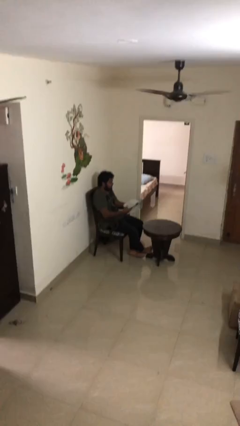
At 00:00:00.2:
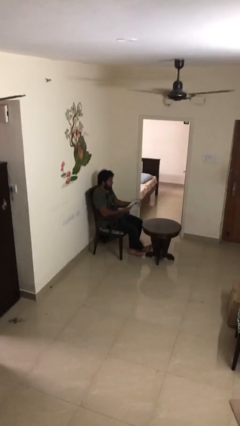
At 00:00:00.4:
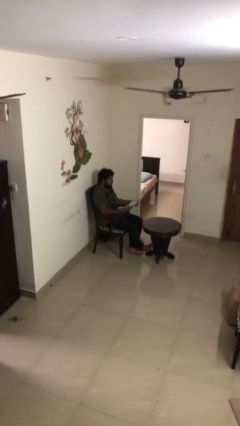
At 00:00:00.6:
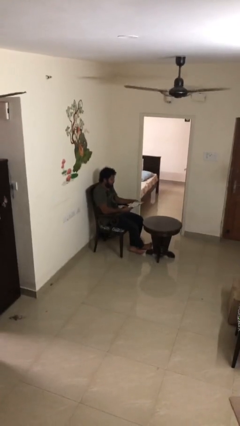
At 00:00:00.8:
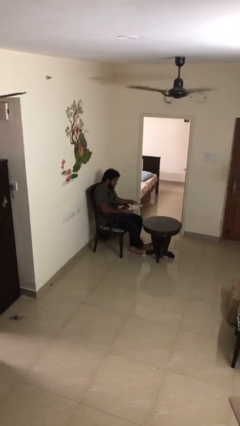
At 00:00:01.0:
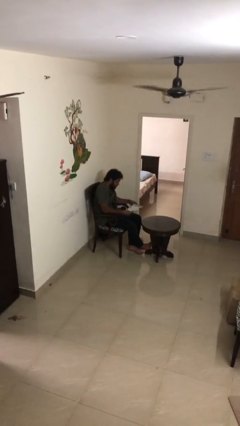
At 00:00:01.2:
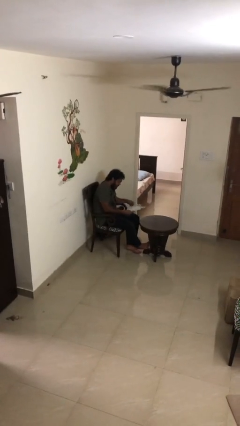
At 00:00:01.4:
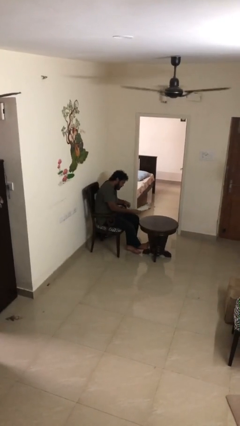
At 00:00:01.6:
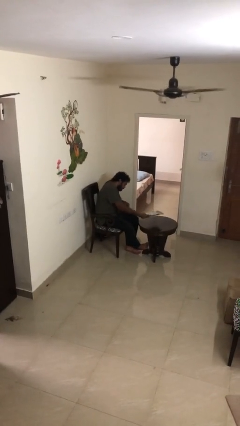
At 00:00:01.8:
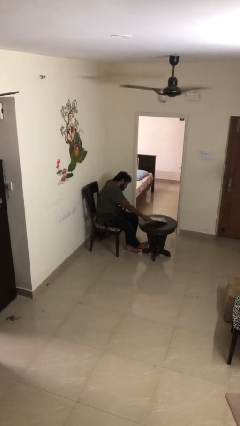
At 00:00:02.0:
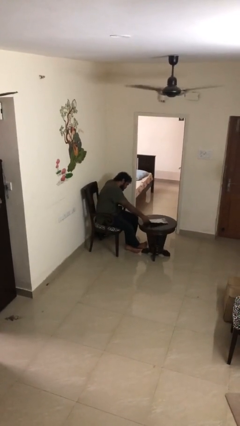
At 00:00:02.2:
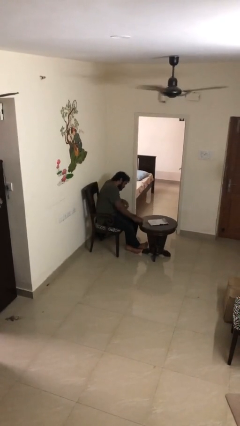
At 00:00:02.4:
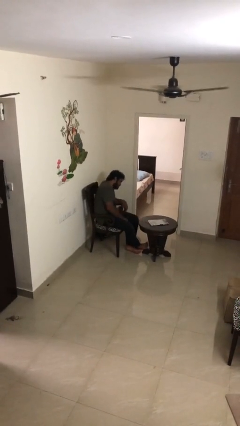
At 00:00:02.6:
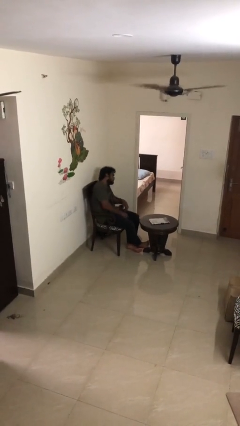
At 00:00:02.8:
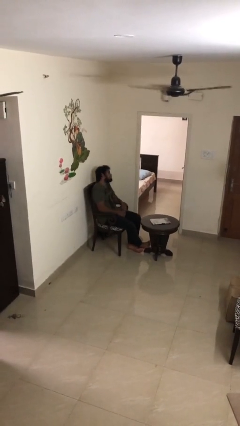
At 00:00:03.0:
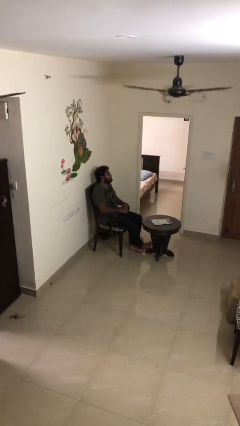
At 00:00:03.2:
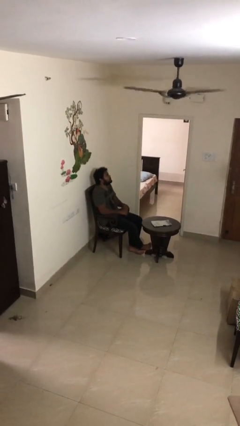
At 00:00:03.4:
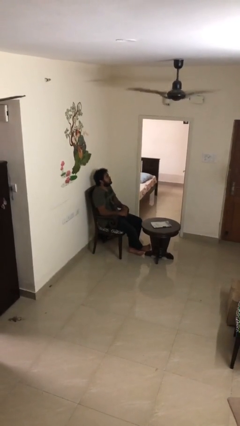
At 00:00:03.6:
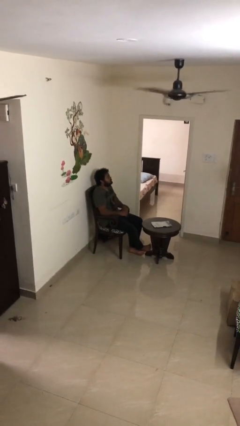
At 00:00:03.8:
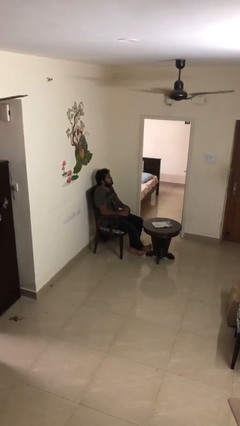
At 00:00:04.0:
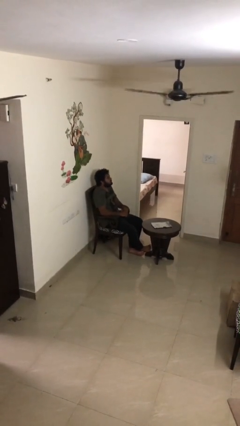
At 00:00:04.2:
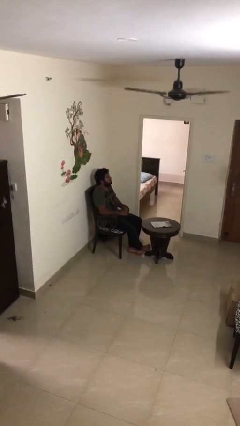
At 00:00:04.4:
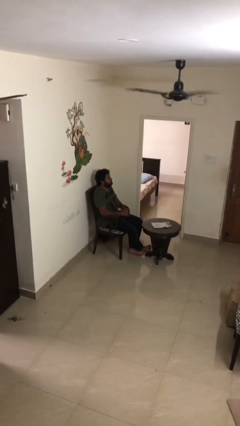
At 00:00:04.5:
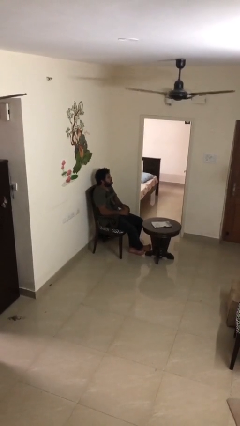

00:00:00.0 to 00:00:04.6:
person puts down object on table

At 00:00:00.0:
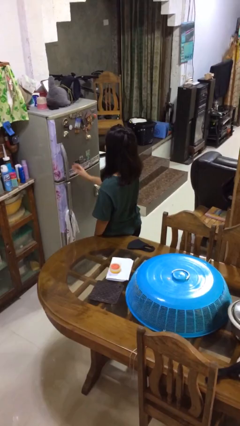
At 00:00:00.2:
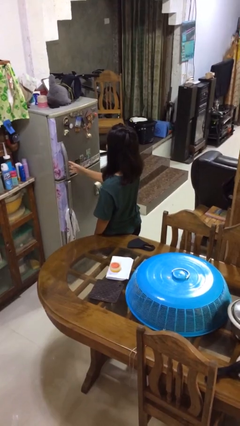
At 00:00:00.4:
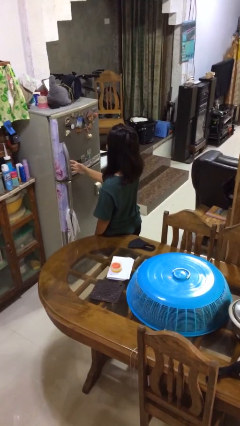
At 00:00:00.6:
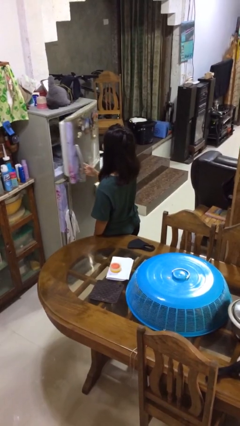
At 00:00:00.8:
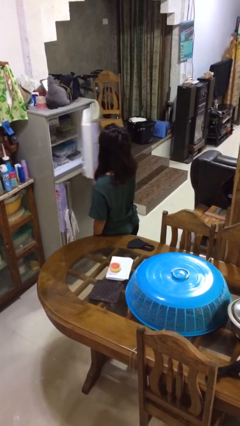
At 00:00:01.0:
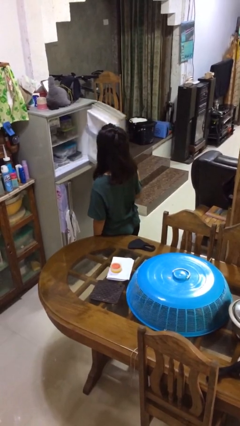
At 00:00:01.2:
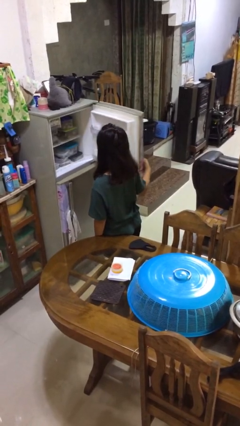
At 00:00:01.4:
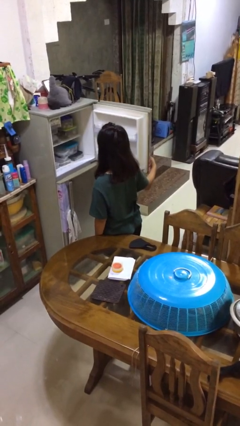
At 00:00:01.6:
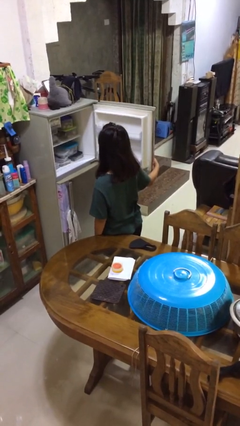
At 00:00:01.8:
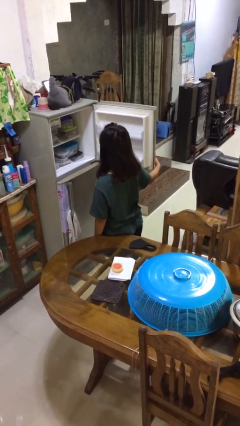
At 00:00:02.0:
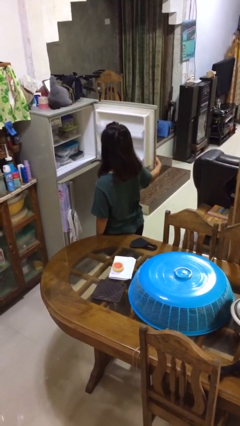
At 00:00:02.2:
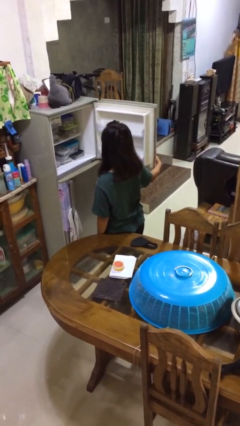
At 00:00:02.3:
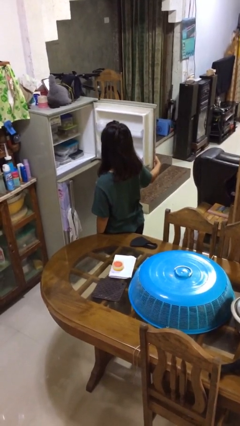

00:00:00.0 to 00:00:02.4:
person opens refrigerator

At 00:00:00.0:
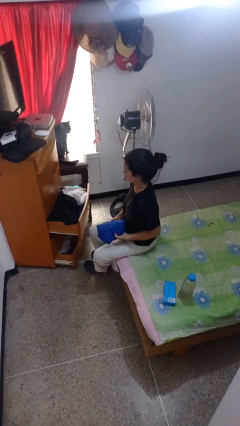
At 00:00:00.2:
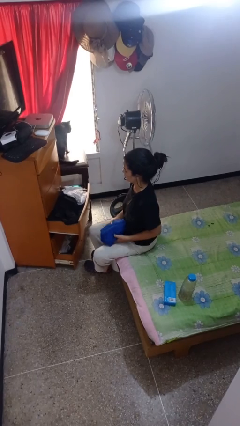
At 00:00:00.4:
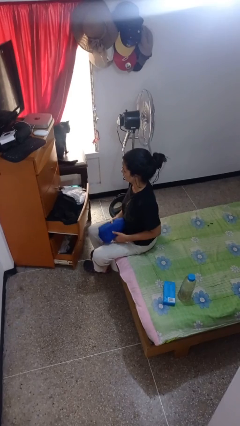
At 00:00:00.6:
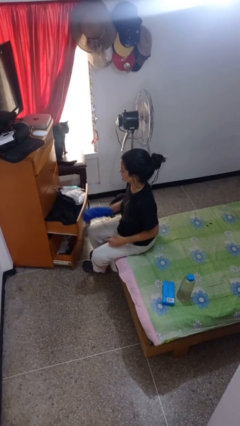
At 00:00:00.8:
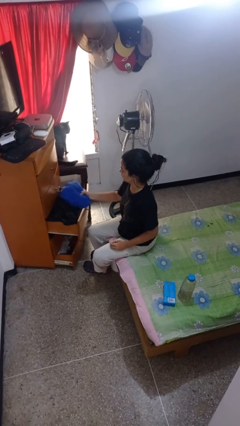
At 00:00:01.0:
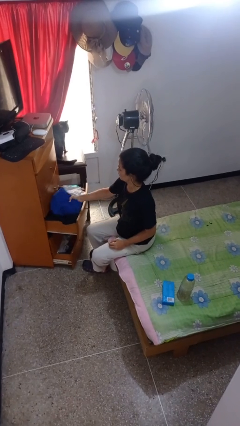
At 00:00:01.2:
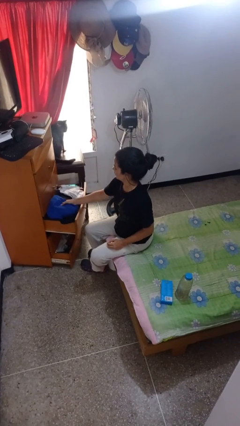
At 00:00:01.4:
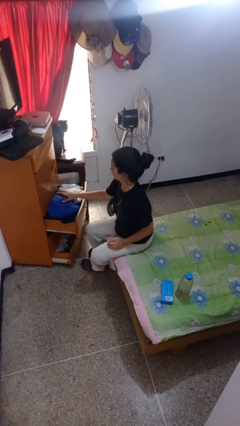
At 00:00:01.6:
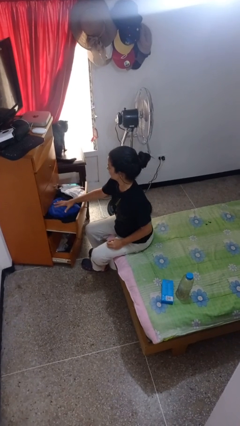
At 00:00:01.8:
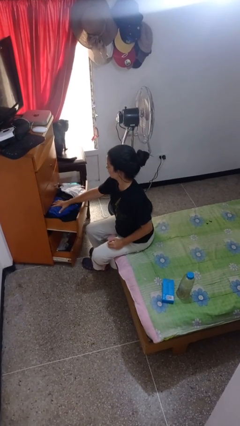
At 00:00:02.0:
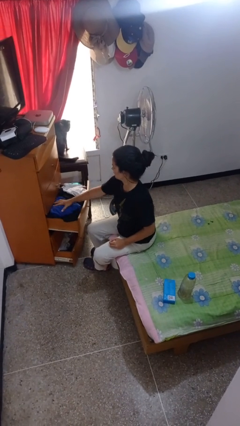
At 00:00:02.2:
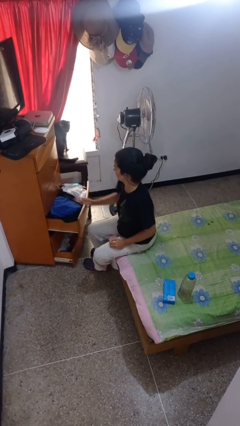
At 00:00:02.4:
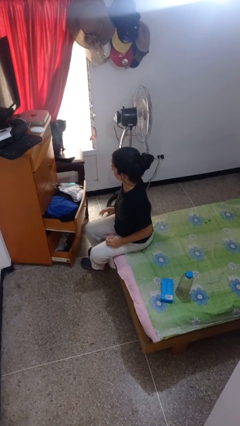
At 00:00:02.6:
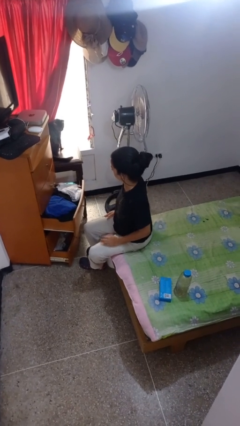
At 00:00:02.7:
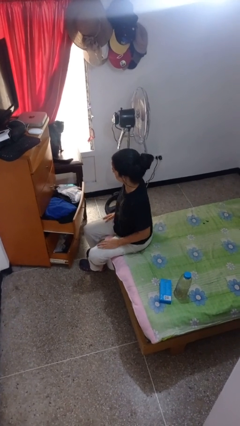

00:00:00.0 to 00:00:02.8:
person puts clothes into dresser

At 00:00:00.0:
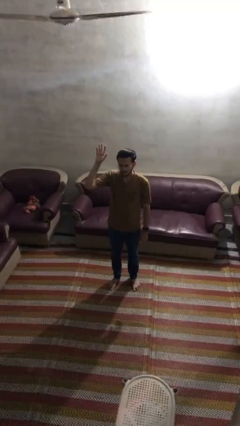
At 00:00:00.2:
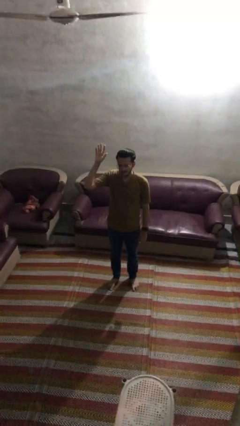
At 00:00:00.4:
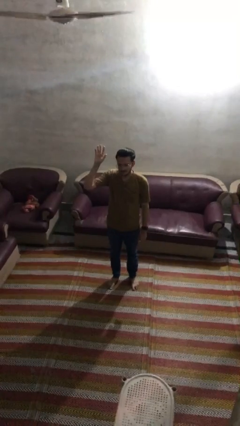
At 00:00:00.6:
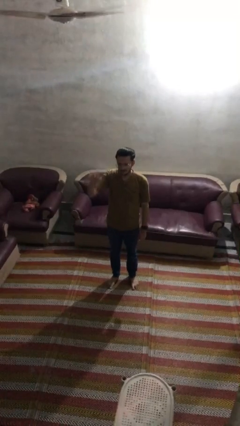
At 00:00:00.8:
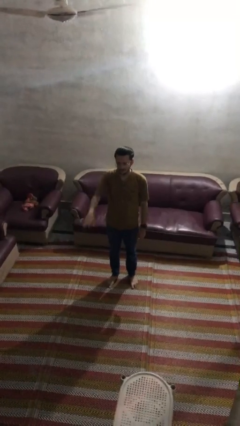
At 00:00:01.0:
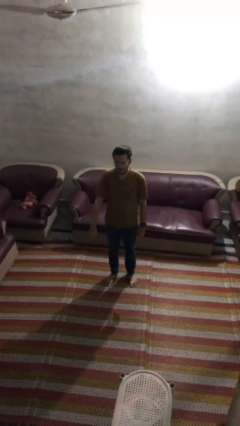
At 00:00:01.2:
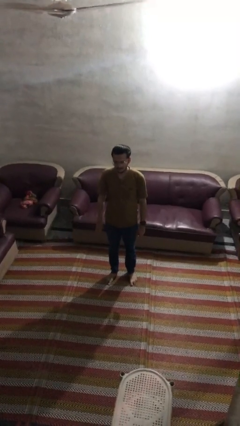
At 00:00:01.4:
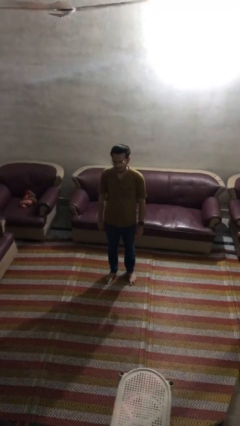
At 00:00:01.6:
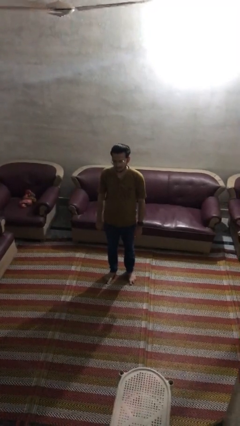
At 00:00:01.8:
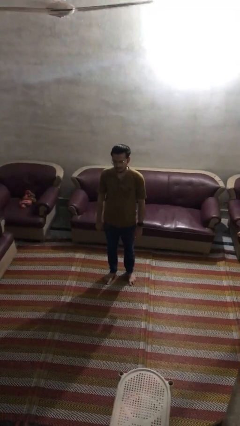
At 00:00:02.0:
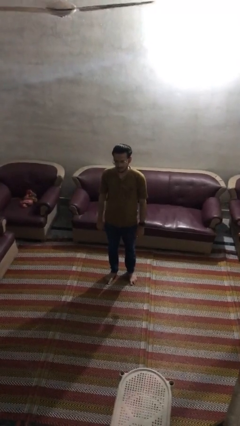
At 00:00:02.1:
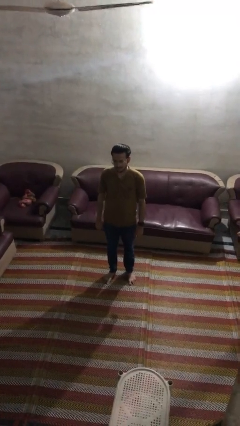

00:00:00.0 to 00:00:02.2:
person gestures lower hand

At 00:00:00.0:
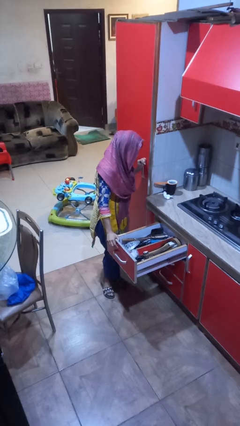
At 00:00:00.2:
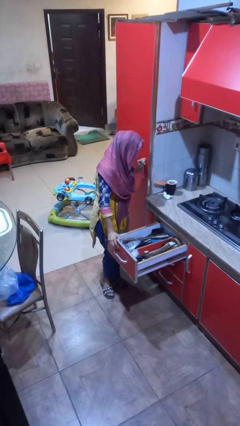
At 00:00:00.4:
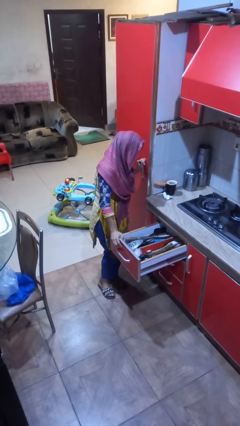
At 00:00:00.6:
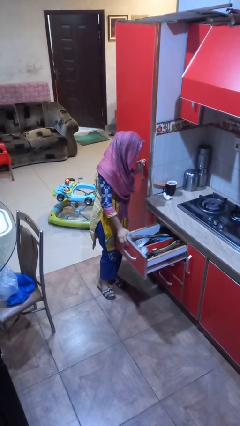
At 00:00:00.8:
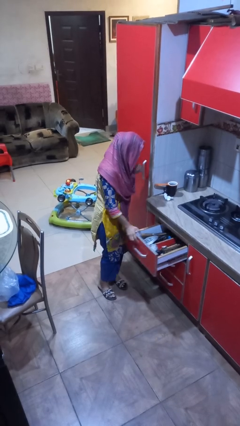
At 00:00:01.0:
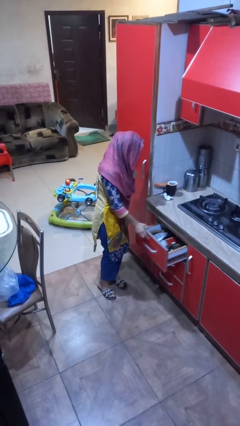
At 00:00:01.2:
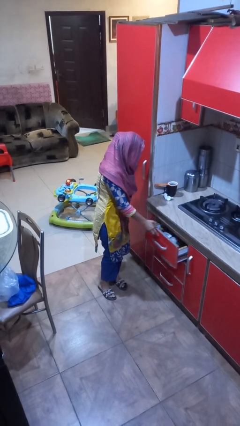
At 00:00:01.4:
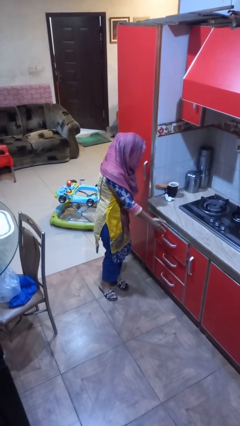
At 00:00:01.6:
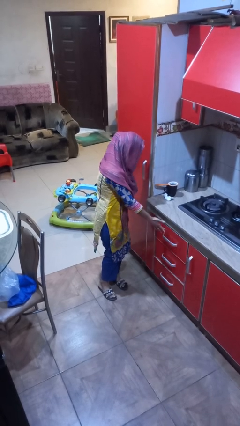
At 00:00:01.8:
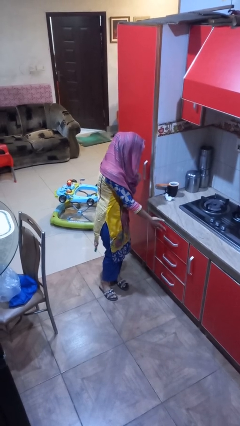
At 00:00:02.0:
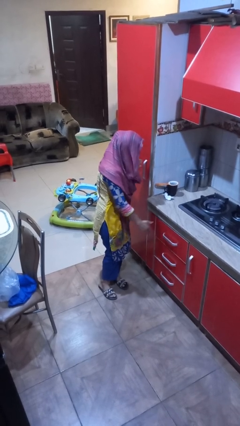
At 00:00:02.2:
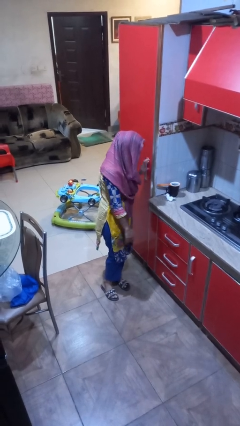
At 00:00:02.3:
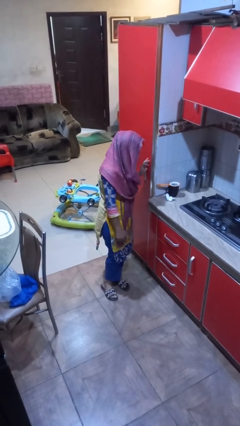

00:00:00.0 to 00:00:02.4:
person closes kitchen drawer

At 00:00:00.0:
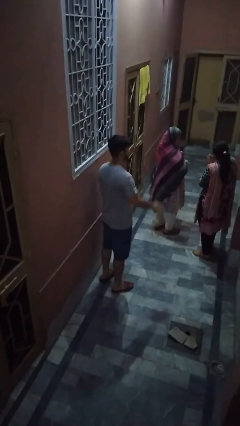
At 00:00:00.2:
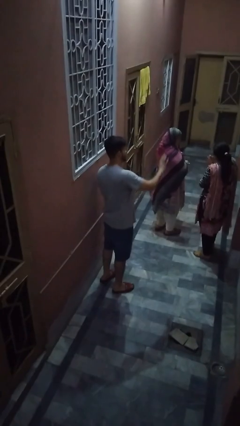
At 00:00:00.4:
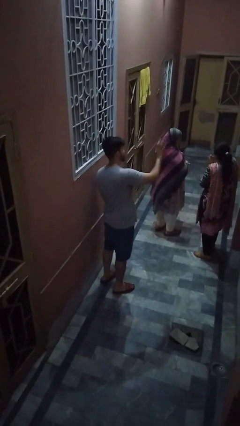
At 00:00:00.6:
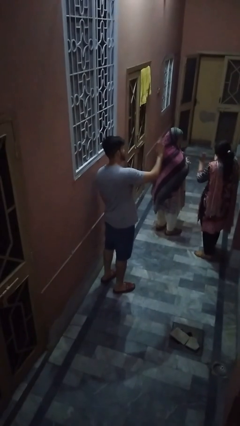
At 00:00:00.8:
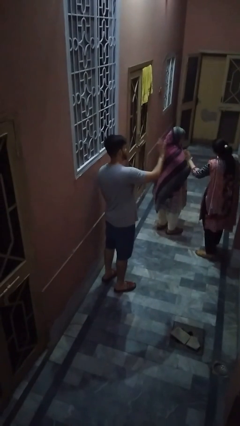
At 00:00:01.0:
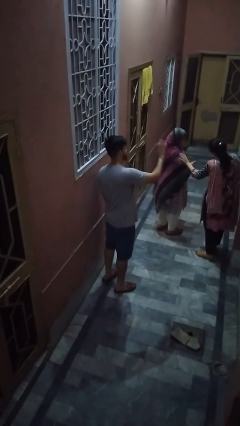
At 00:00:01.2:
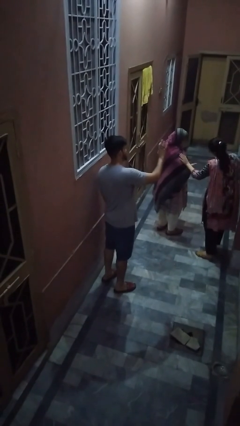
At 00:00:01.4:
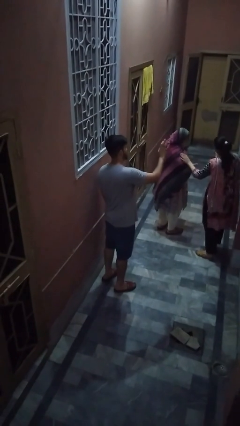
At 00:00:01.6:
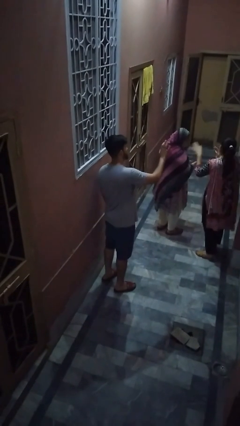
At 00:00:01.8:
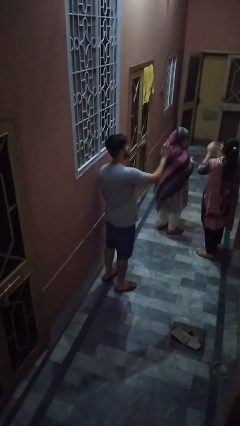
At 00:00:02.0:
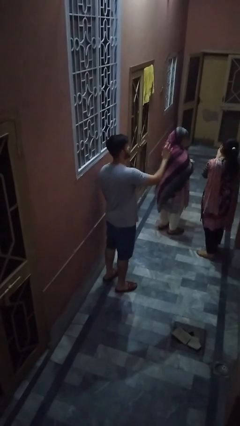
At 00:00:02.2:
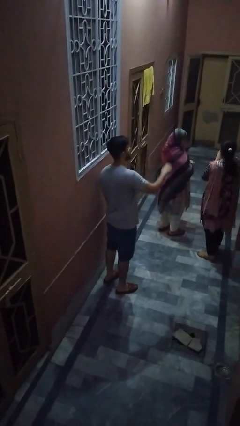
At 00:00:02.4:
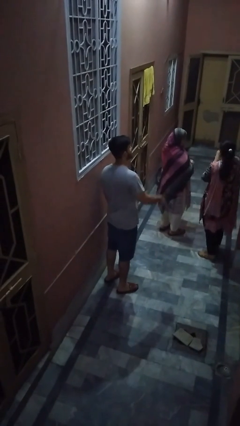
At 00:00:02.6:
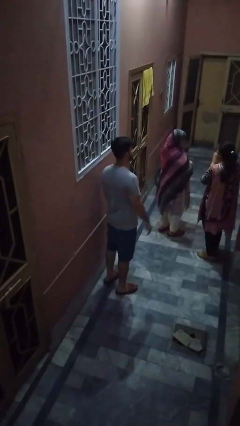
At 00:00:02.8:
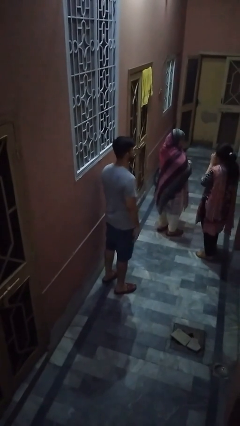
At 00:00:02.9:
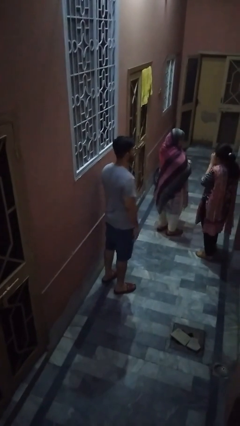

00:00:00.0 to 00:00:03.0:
person waves at person
